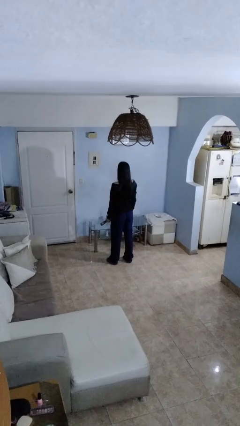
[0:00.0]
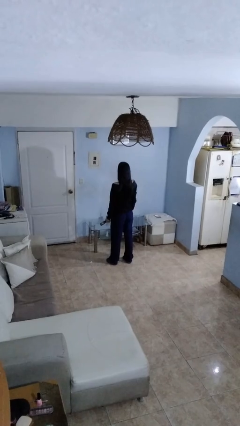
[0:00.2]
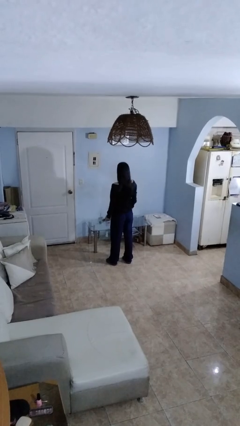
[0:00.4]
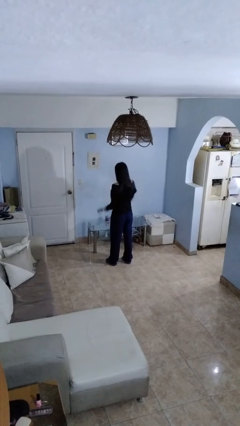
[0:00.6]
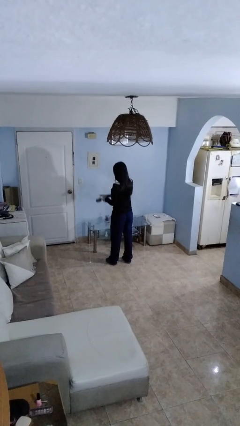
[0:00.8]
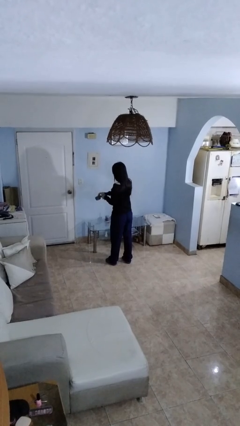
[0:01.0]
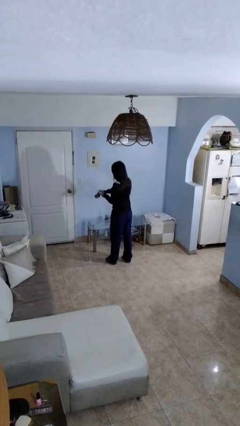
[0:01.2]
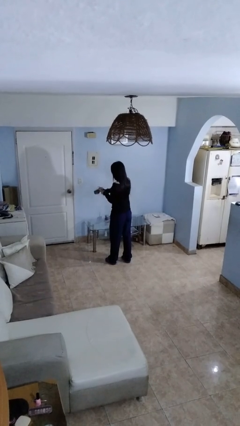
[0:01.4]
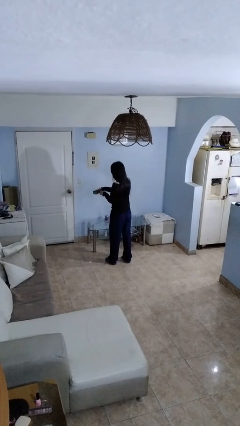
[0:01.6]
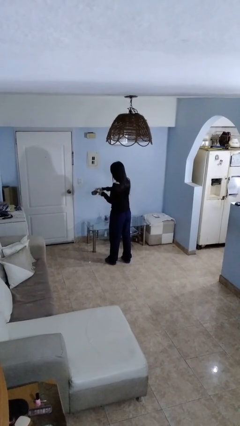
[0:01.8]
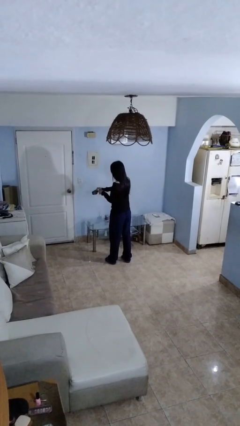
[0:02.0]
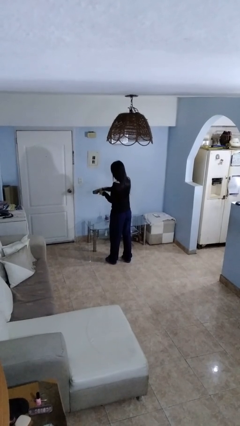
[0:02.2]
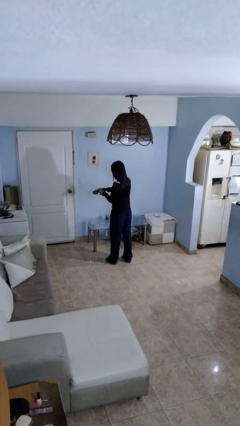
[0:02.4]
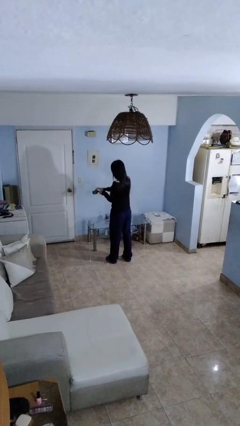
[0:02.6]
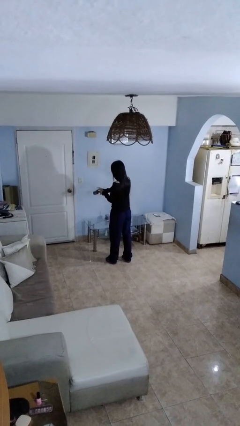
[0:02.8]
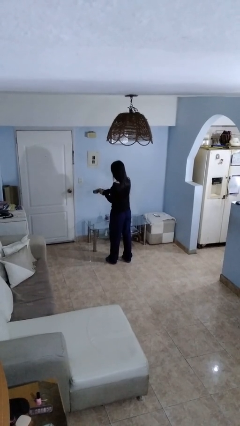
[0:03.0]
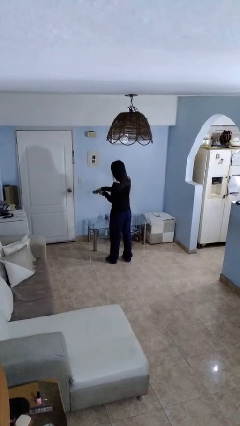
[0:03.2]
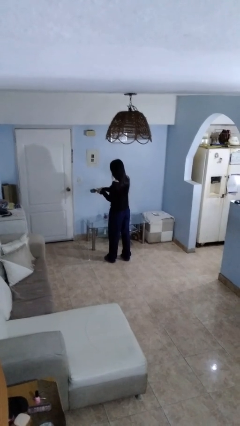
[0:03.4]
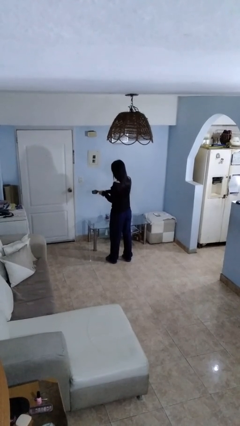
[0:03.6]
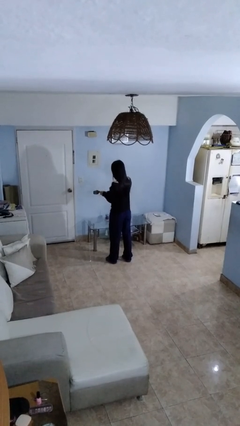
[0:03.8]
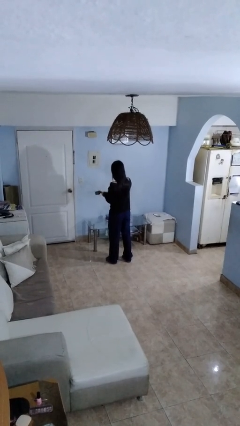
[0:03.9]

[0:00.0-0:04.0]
person opens can with can opener

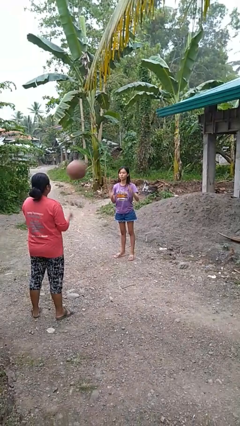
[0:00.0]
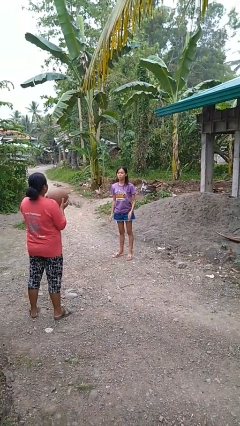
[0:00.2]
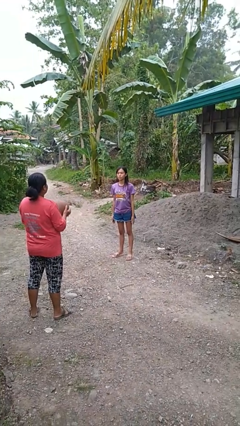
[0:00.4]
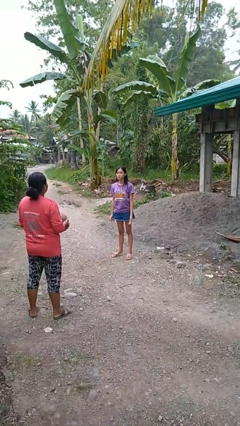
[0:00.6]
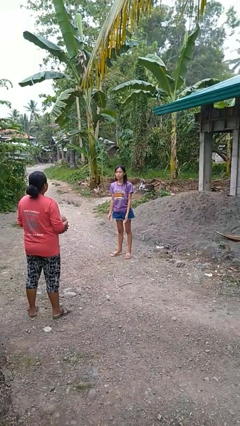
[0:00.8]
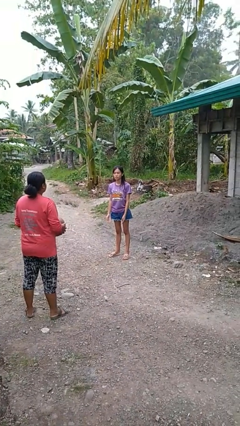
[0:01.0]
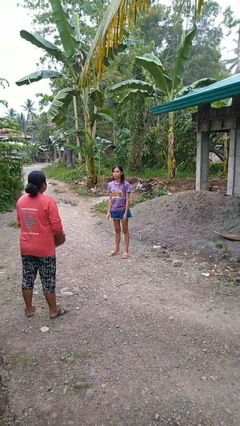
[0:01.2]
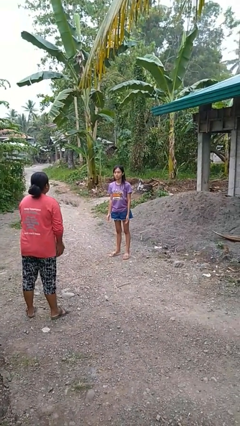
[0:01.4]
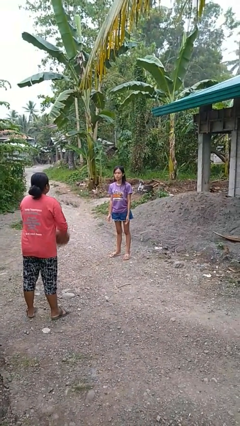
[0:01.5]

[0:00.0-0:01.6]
person throws object to person

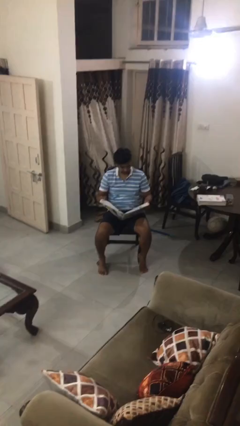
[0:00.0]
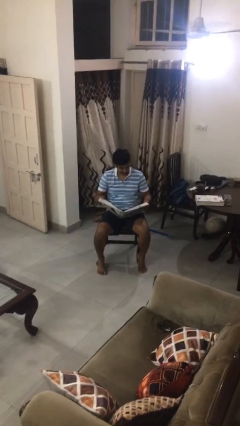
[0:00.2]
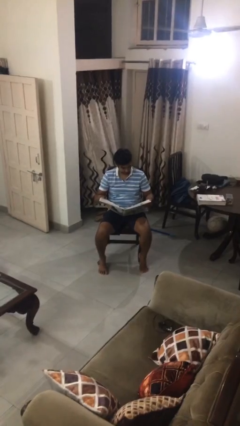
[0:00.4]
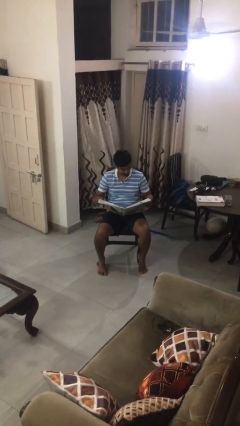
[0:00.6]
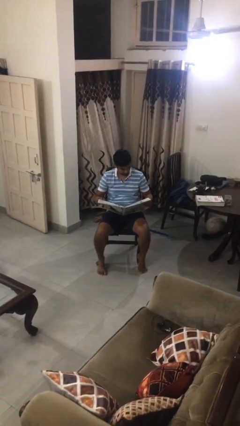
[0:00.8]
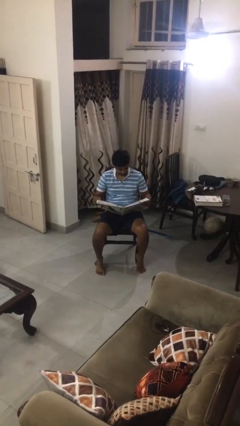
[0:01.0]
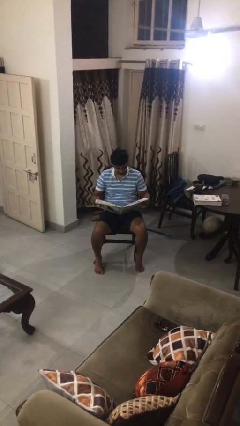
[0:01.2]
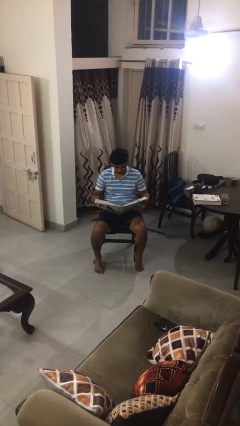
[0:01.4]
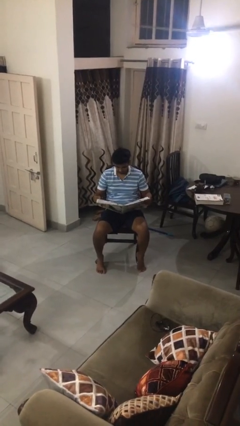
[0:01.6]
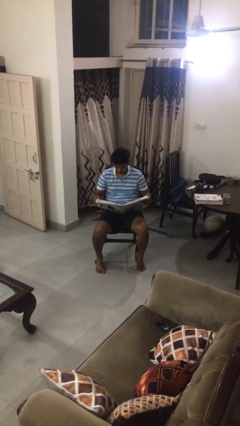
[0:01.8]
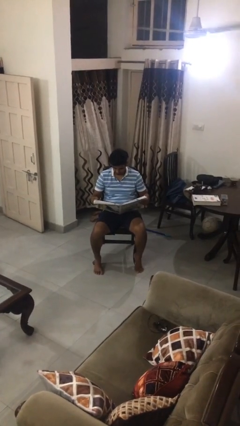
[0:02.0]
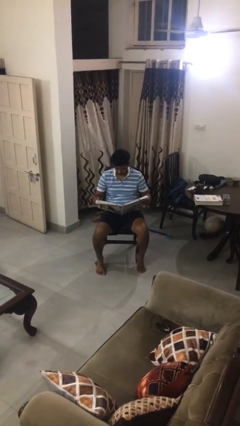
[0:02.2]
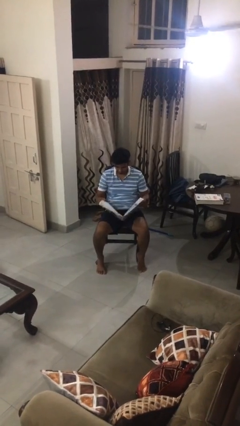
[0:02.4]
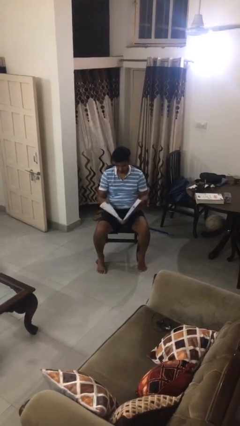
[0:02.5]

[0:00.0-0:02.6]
person reads newspaper

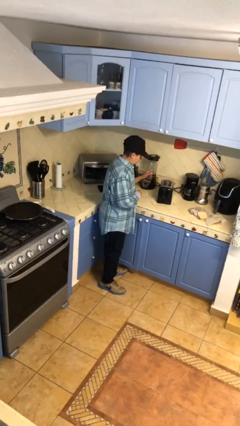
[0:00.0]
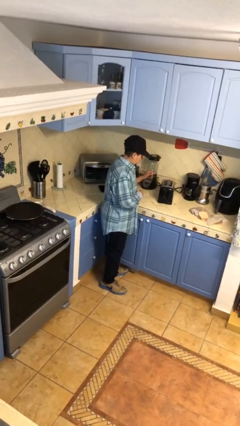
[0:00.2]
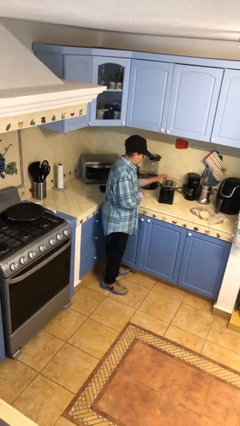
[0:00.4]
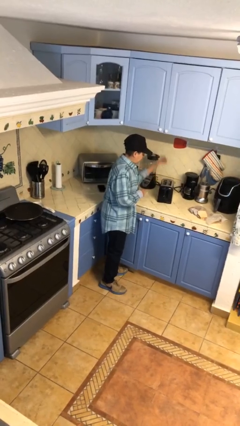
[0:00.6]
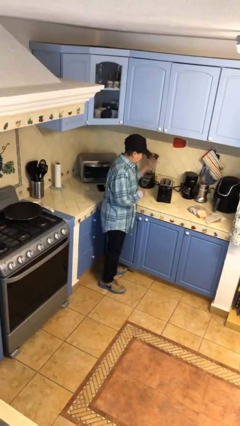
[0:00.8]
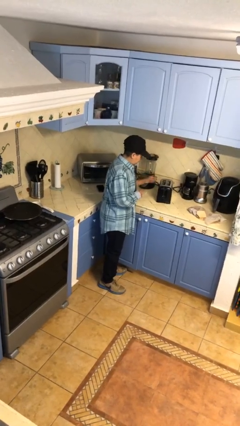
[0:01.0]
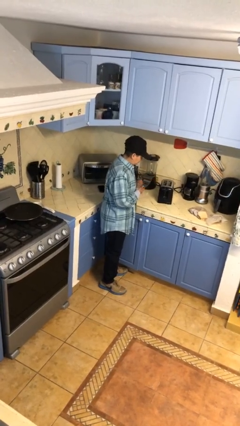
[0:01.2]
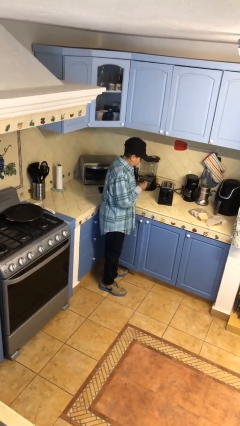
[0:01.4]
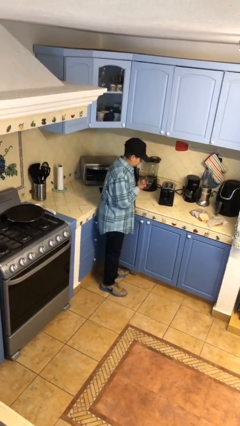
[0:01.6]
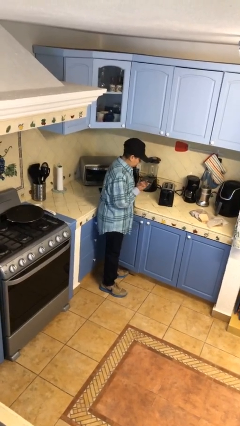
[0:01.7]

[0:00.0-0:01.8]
person burns hand

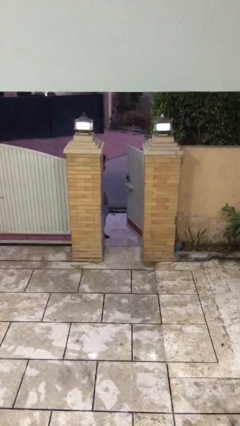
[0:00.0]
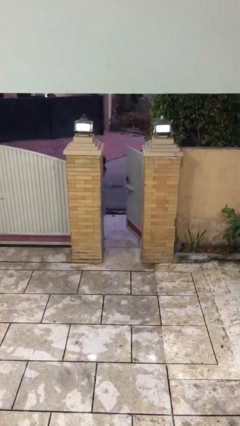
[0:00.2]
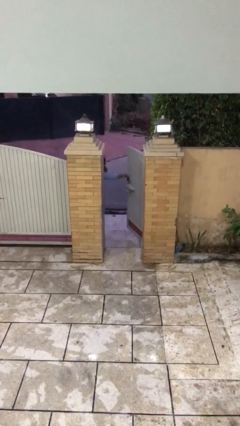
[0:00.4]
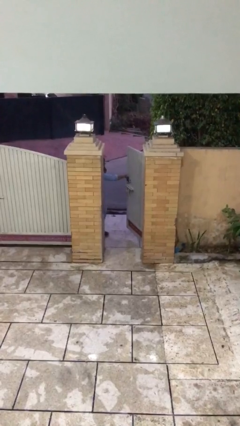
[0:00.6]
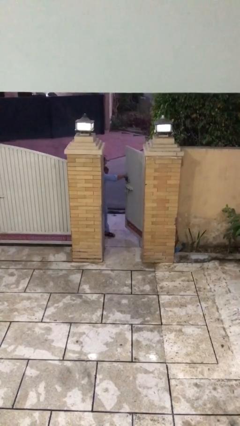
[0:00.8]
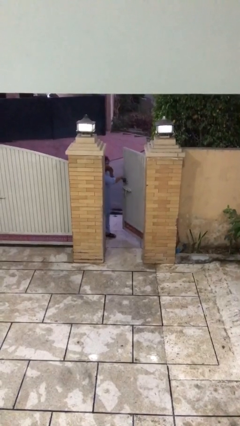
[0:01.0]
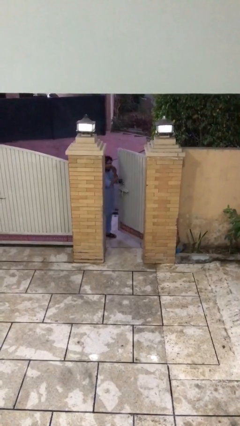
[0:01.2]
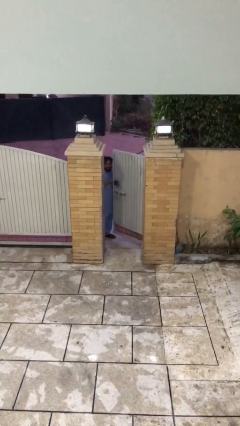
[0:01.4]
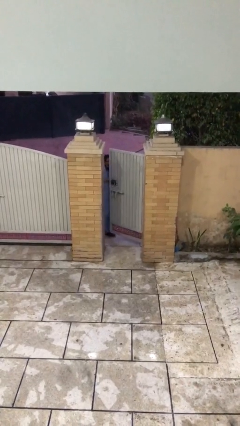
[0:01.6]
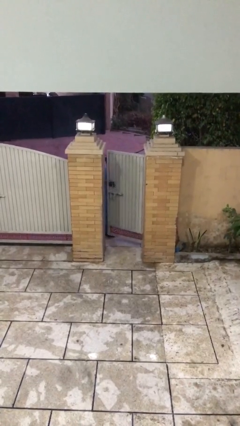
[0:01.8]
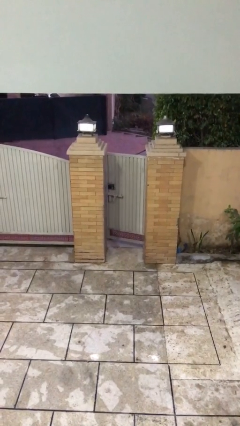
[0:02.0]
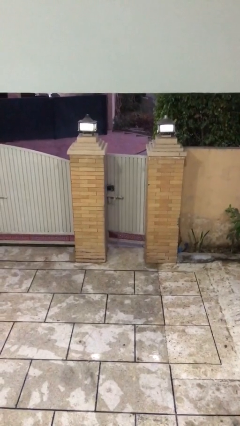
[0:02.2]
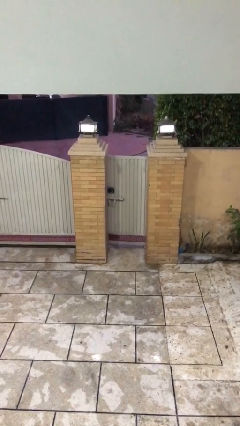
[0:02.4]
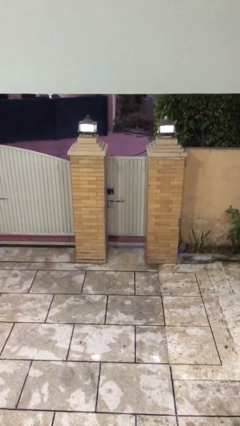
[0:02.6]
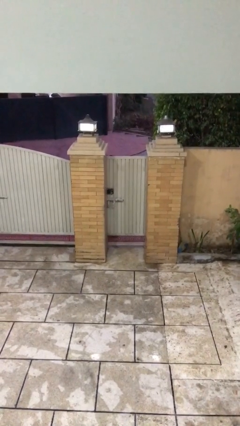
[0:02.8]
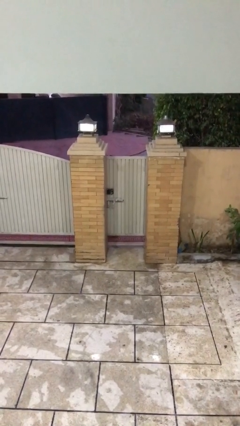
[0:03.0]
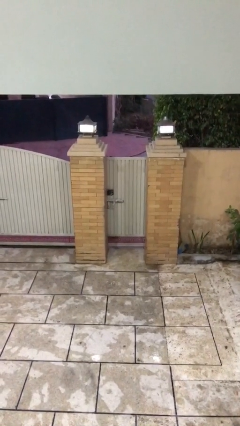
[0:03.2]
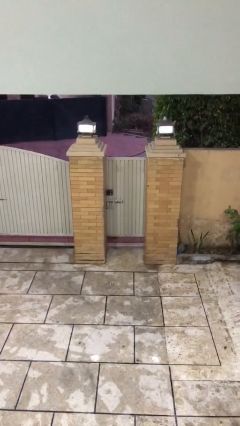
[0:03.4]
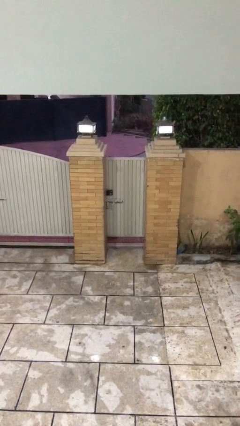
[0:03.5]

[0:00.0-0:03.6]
person closes facility door

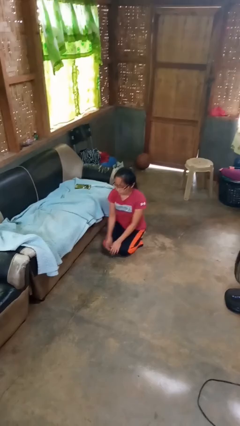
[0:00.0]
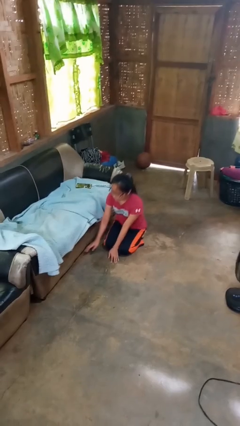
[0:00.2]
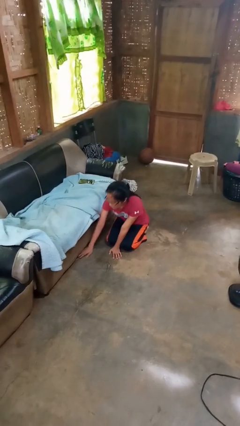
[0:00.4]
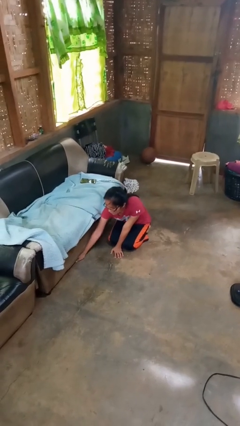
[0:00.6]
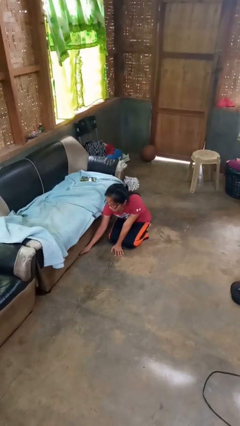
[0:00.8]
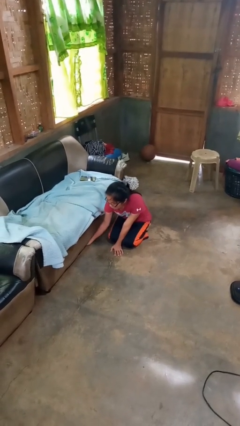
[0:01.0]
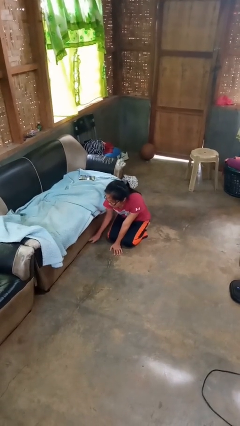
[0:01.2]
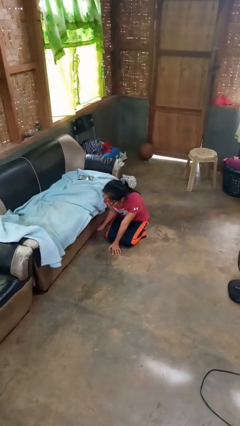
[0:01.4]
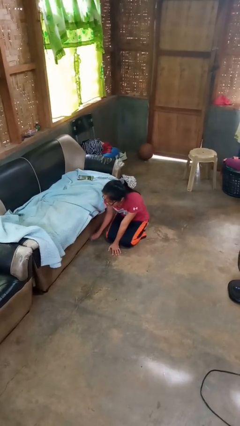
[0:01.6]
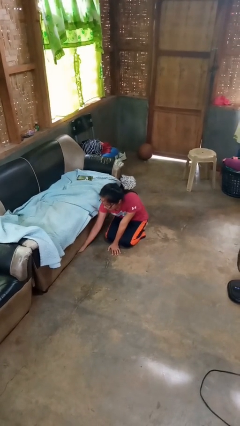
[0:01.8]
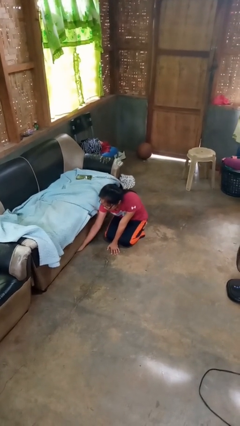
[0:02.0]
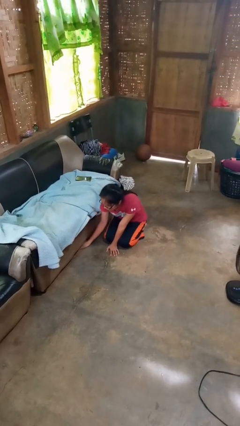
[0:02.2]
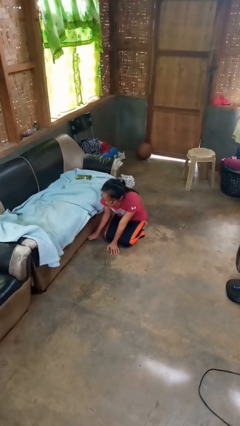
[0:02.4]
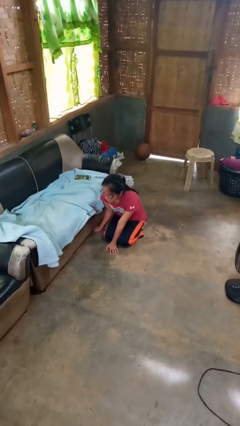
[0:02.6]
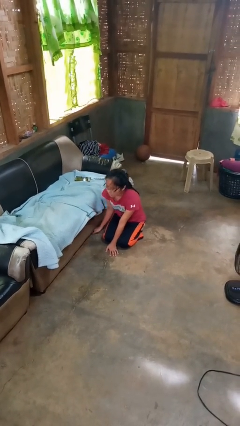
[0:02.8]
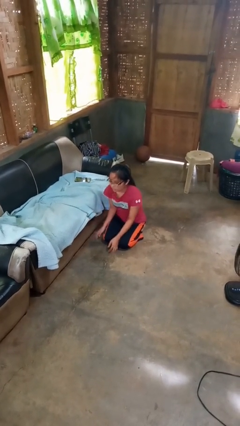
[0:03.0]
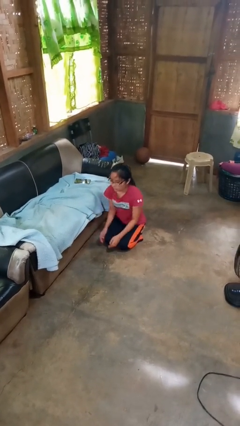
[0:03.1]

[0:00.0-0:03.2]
person searches under couch

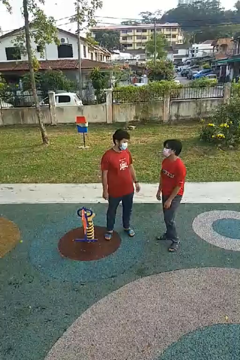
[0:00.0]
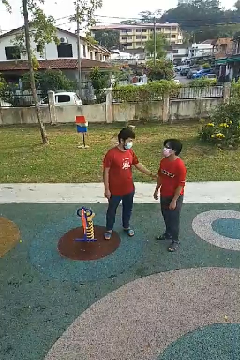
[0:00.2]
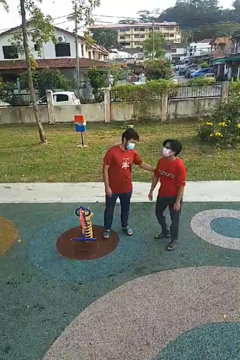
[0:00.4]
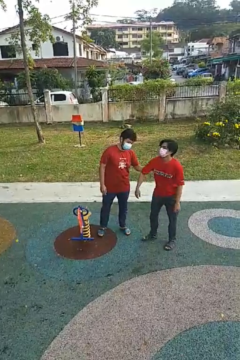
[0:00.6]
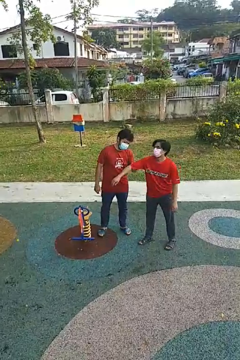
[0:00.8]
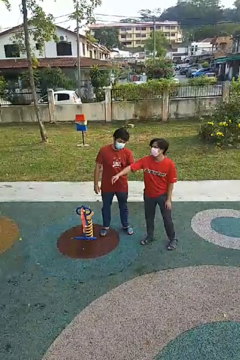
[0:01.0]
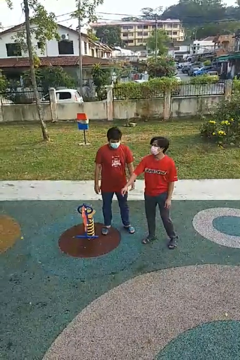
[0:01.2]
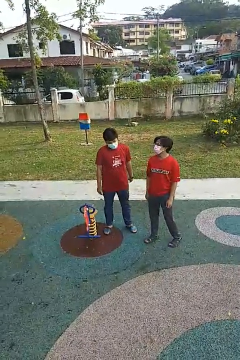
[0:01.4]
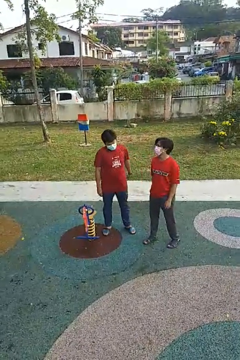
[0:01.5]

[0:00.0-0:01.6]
person grabs person by bicep
